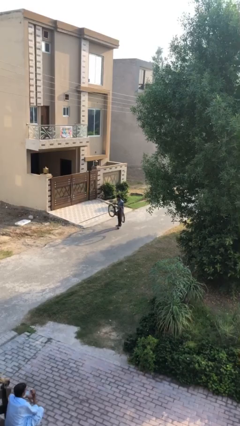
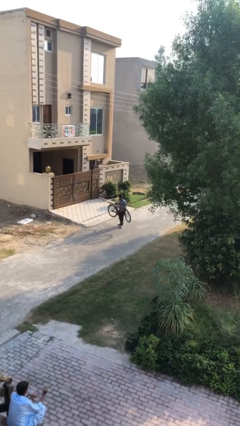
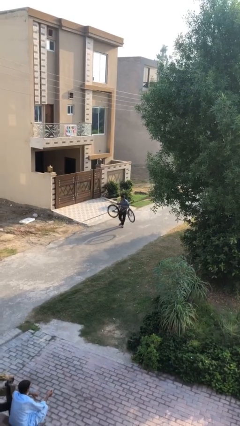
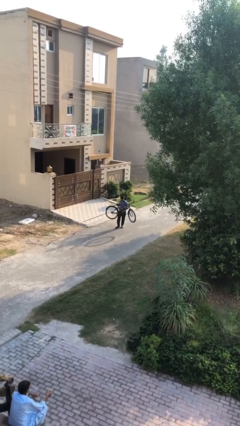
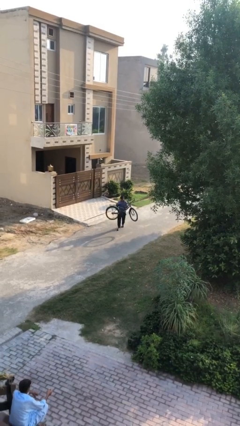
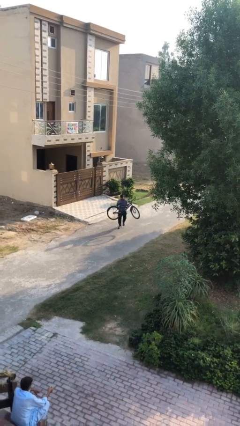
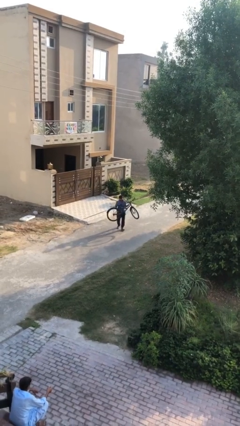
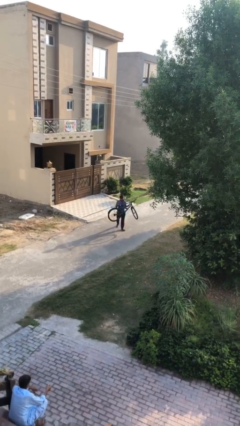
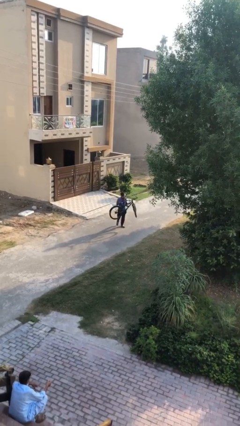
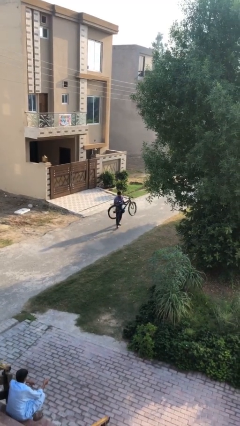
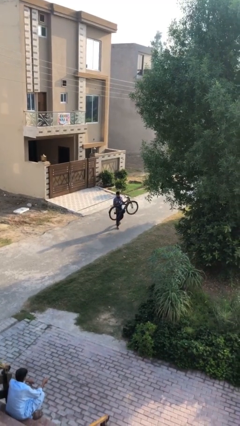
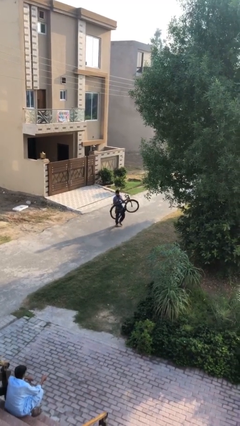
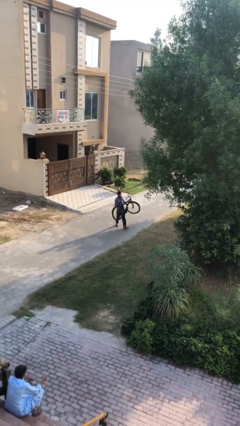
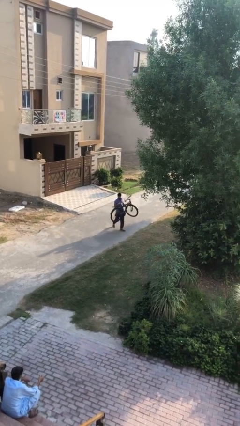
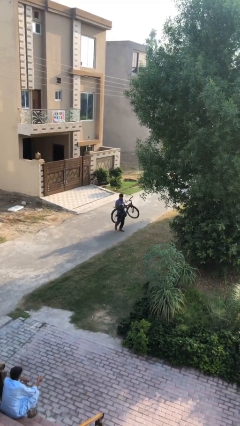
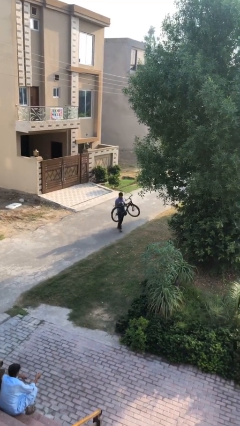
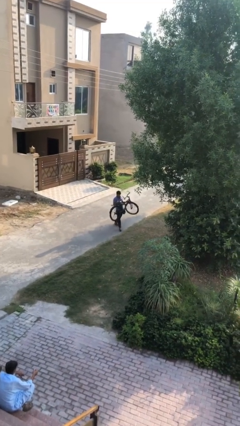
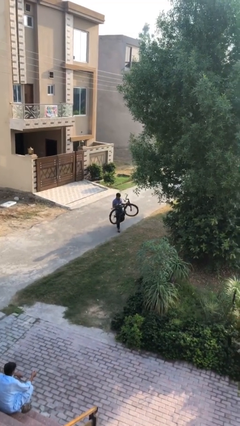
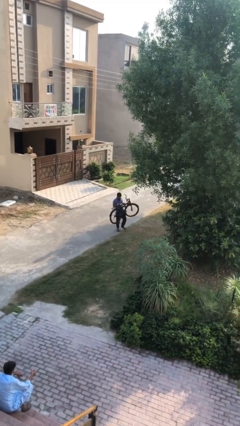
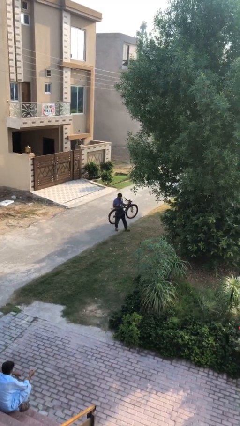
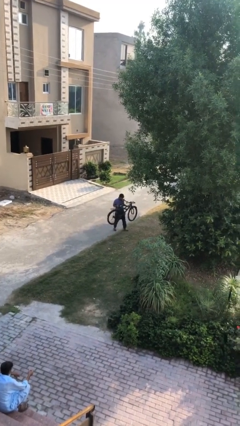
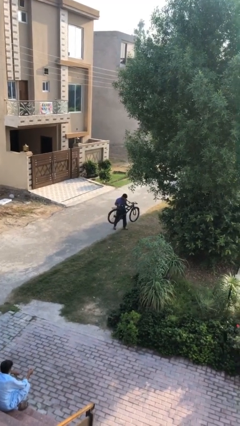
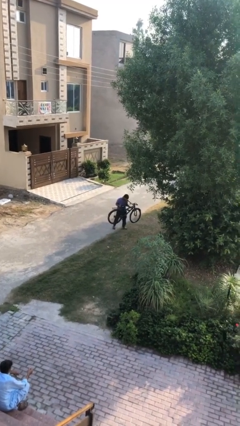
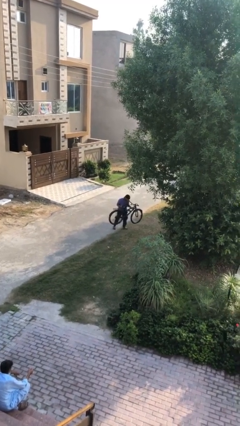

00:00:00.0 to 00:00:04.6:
person carries heavy object

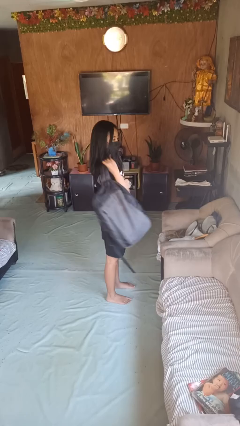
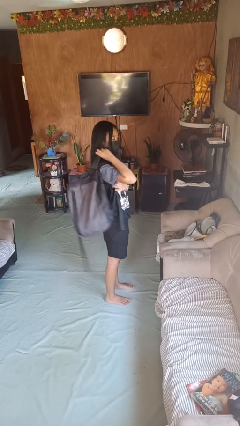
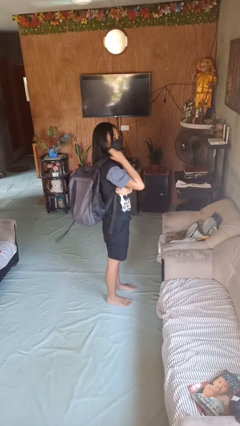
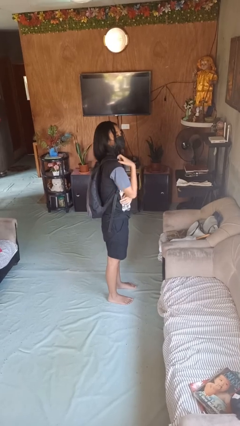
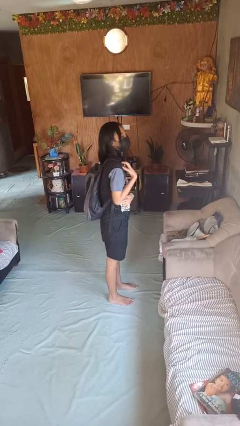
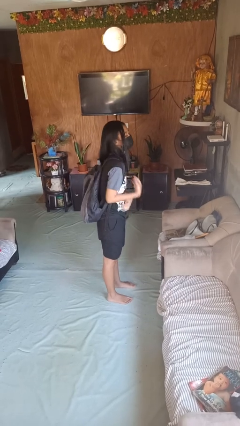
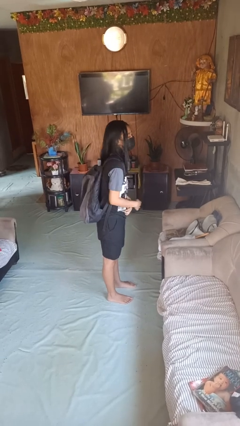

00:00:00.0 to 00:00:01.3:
person puts on backpack

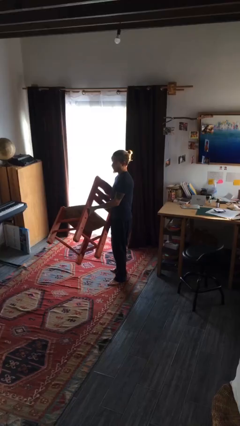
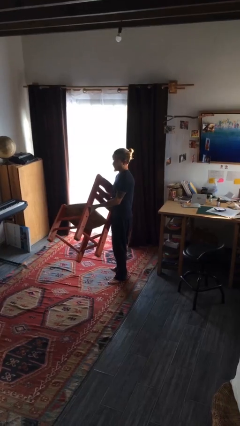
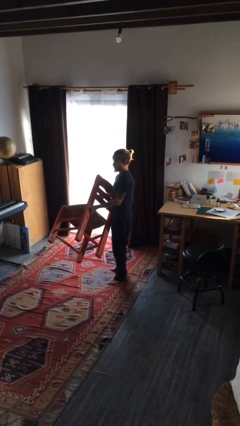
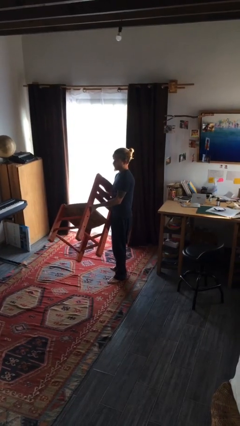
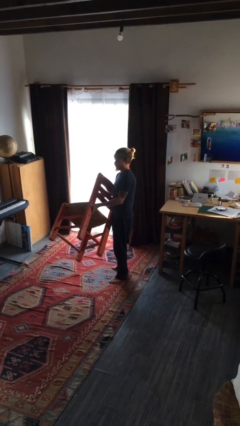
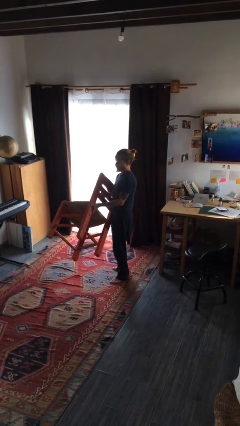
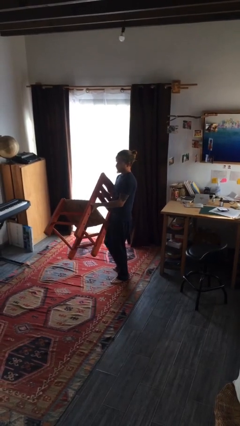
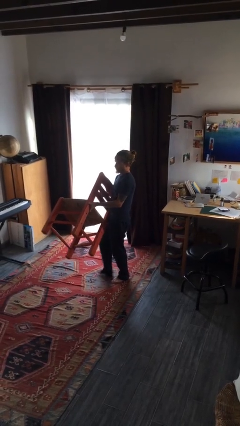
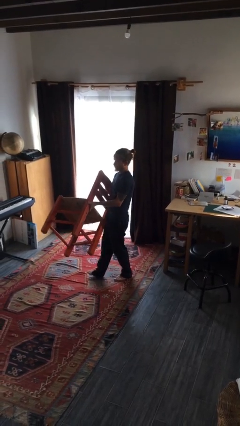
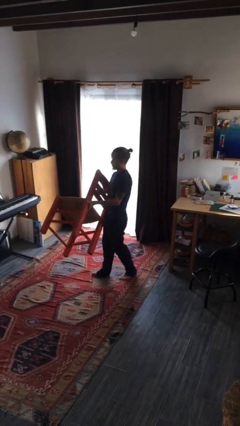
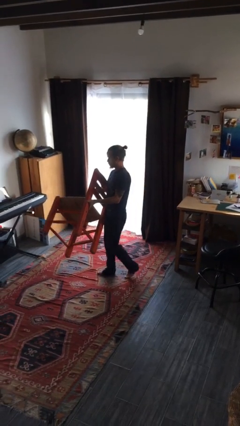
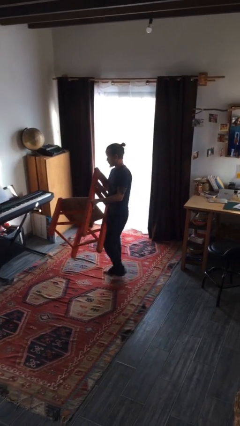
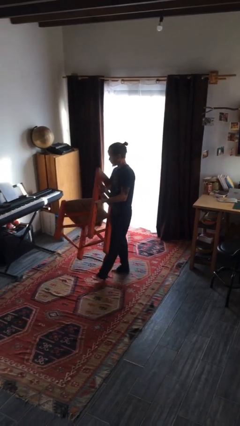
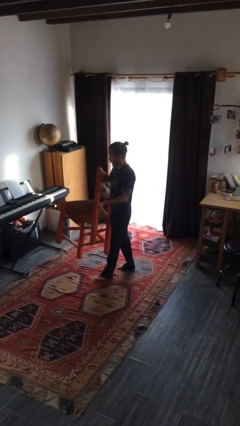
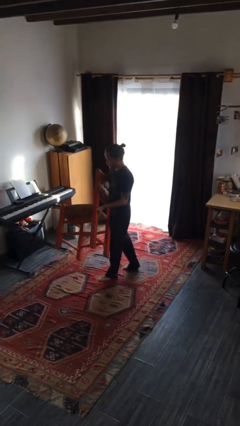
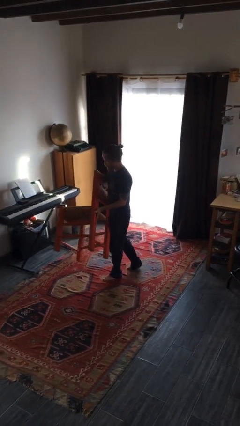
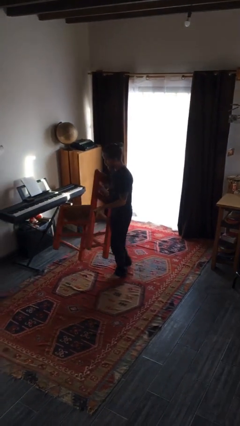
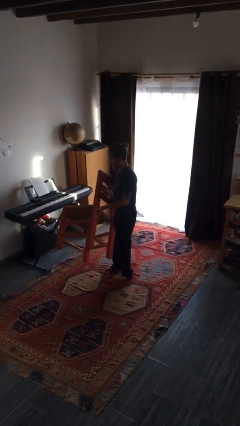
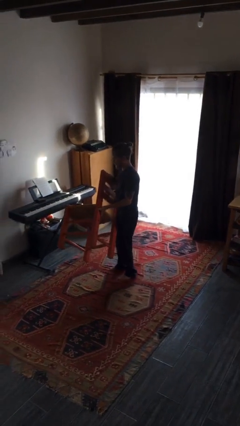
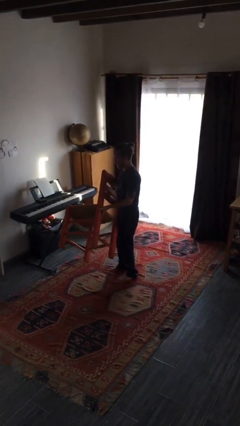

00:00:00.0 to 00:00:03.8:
person carries furniture

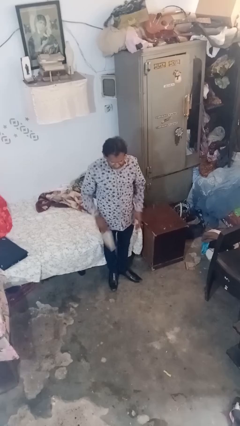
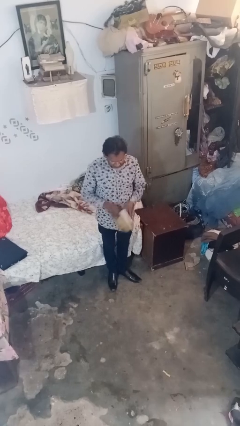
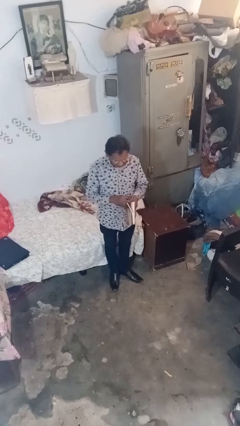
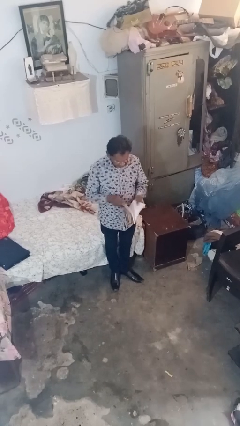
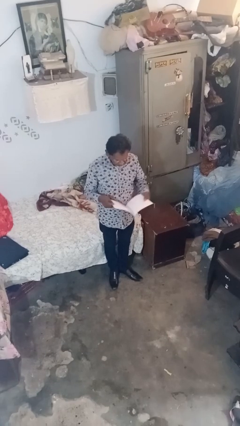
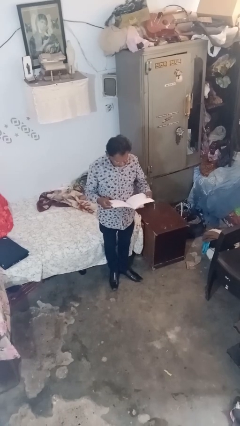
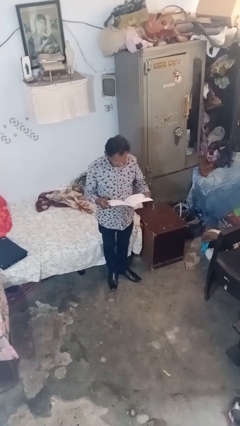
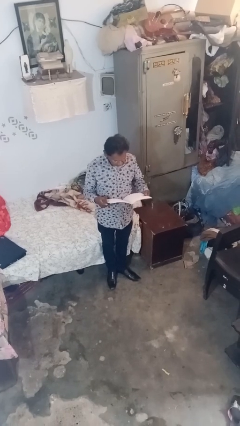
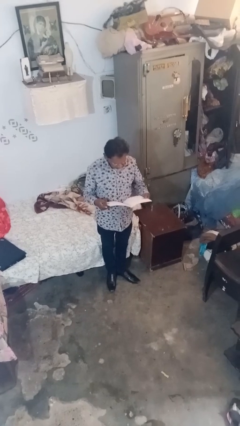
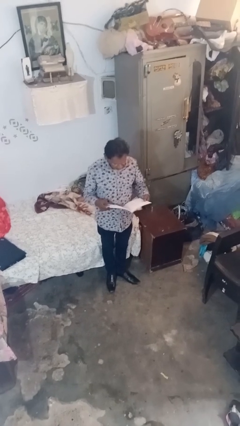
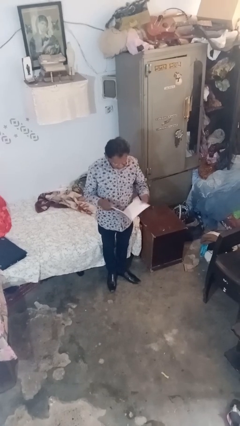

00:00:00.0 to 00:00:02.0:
person reads document

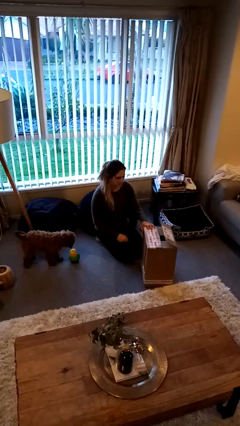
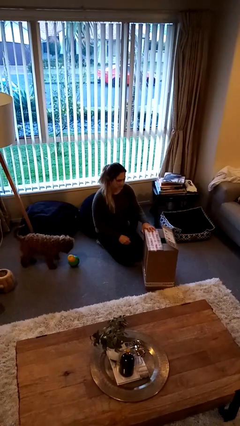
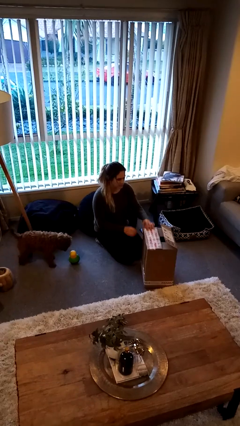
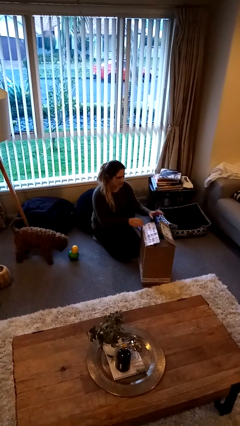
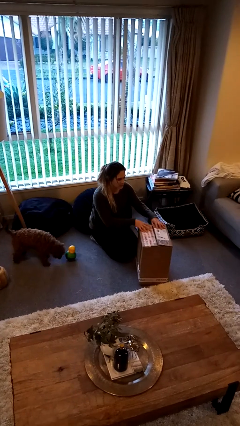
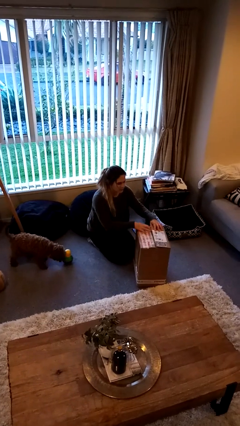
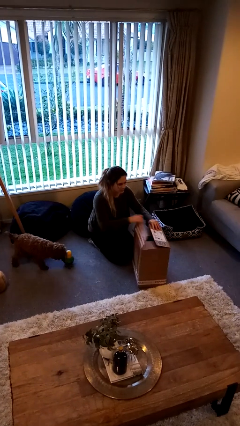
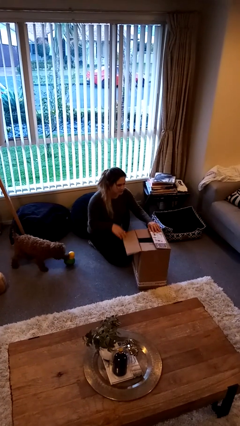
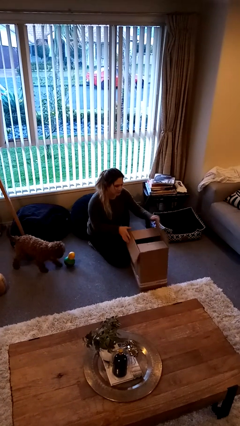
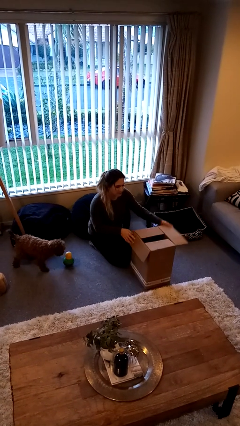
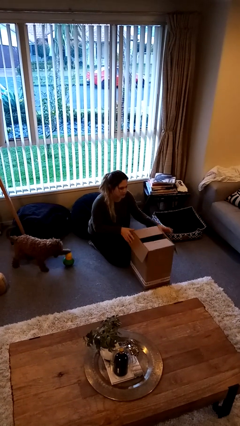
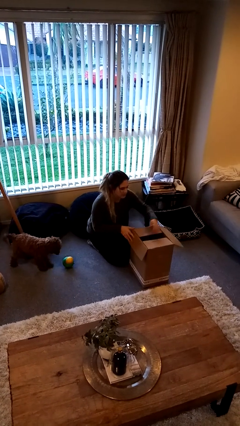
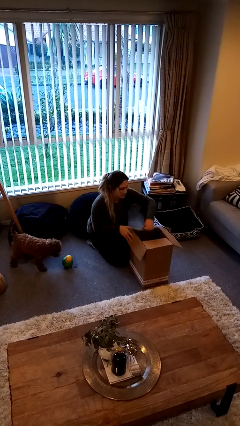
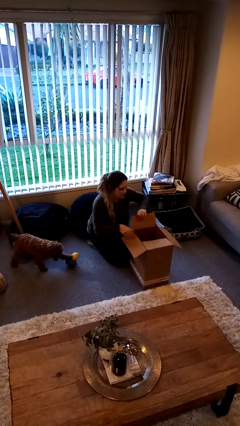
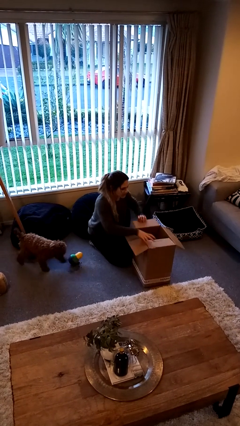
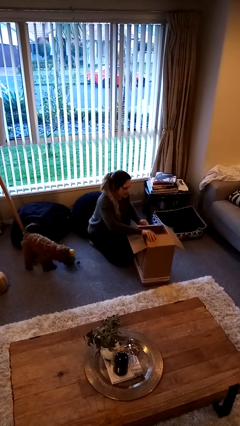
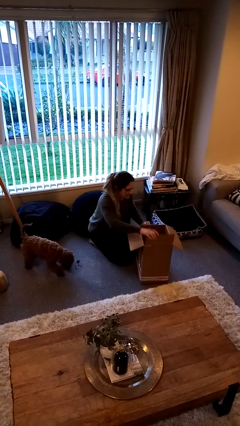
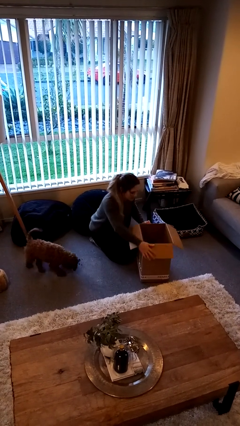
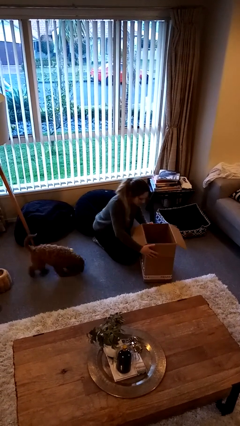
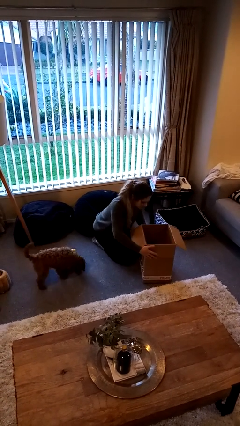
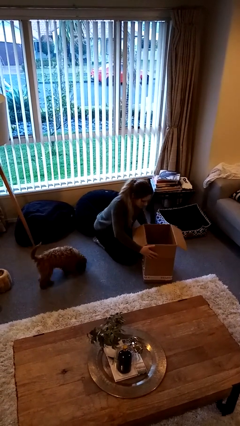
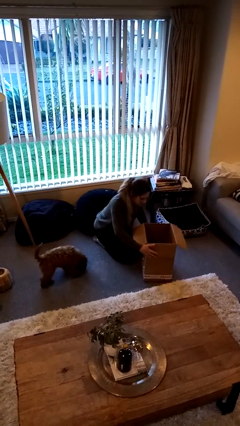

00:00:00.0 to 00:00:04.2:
person opens box

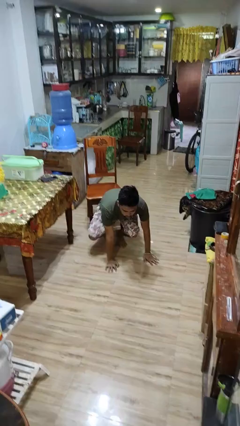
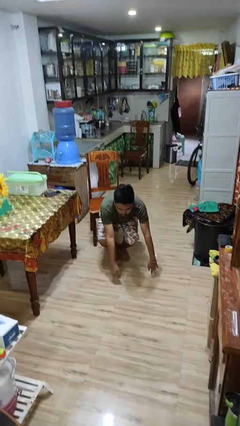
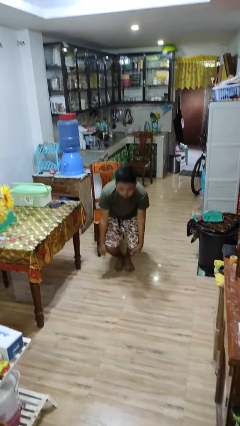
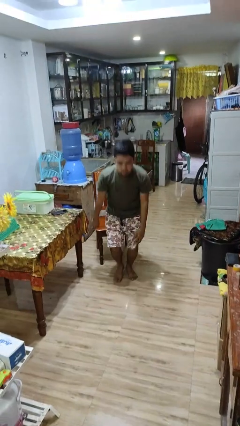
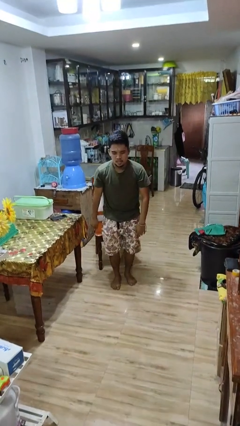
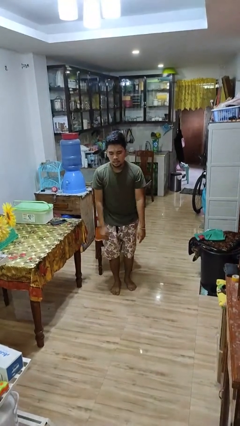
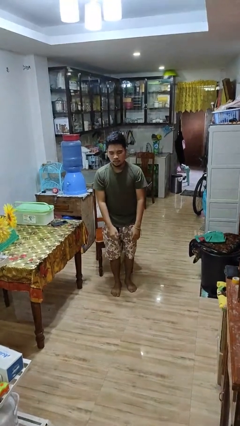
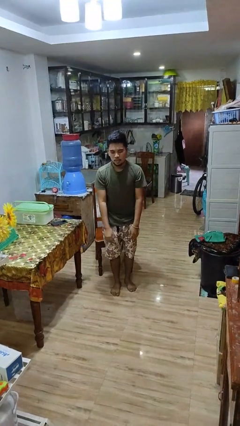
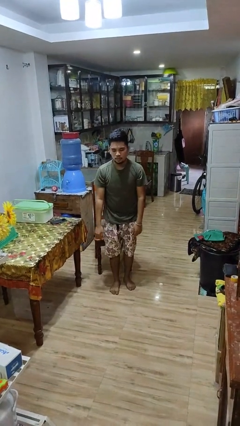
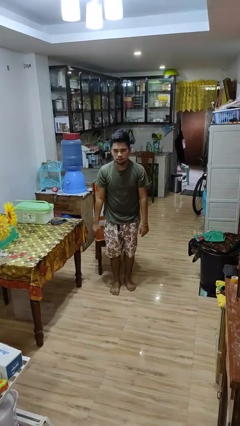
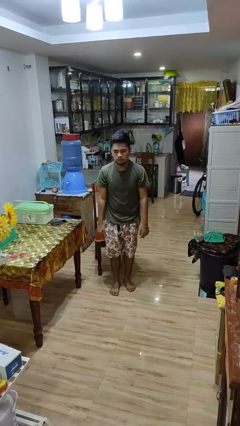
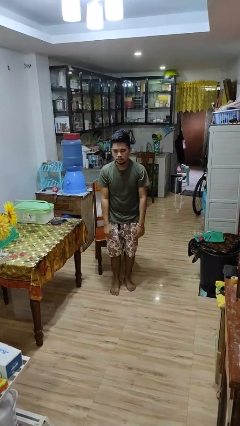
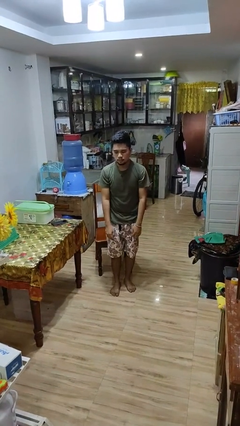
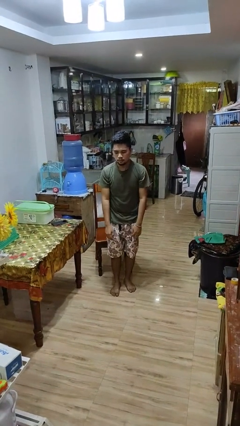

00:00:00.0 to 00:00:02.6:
person stands up from floor
